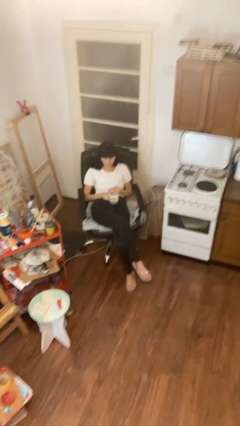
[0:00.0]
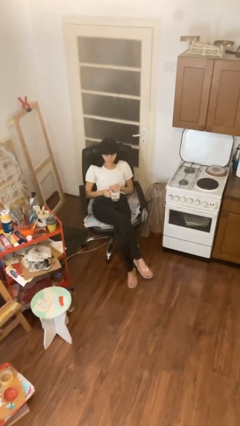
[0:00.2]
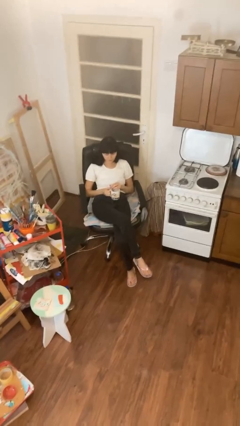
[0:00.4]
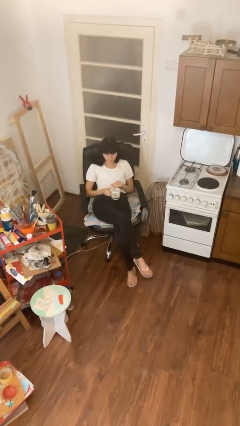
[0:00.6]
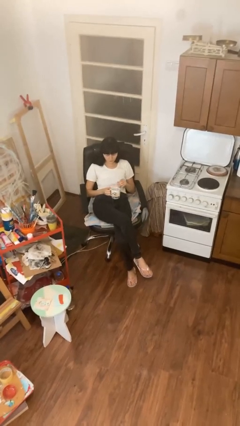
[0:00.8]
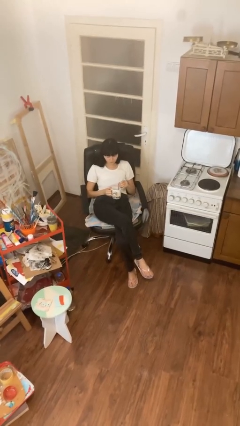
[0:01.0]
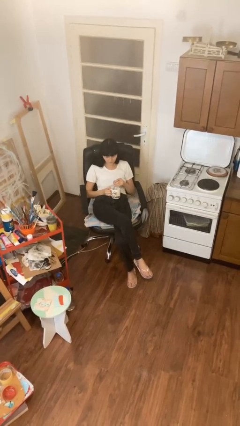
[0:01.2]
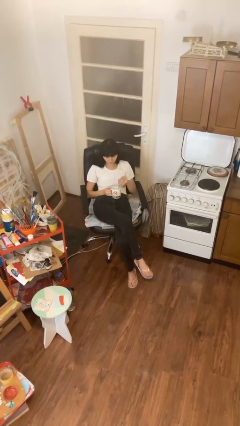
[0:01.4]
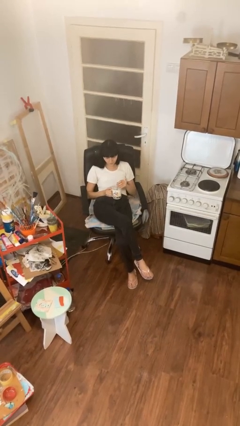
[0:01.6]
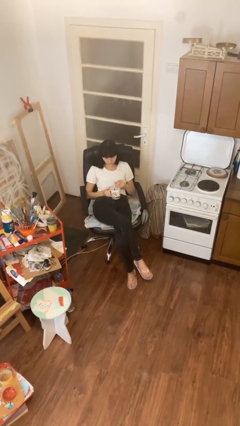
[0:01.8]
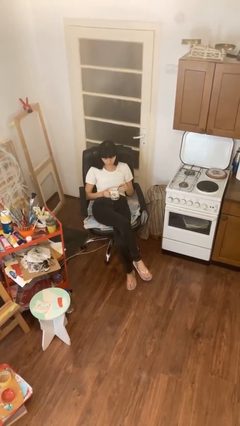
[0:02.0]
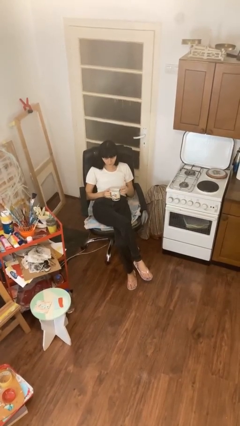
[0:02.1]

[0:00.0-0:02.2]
person stirs mug

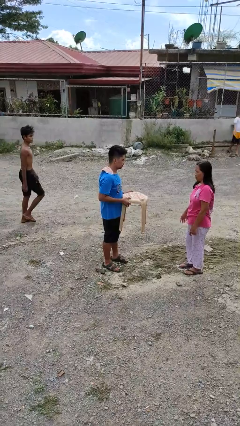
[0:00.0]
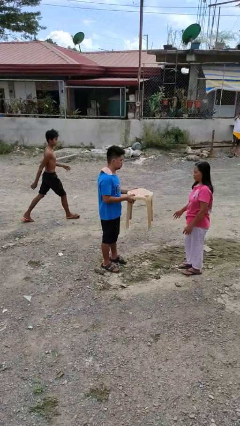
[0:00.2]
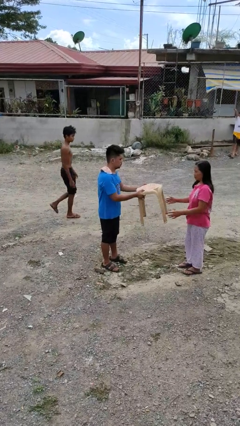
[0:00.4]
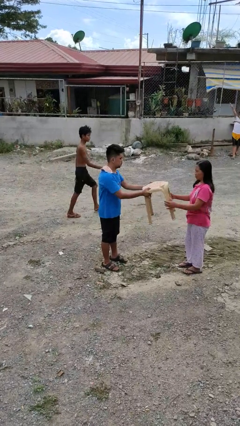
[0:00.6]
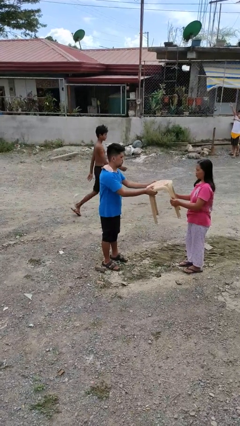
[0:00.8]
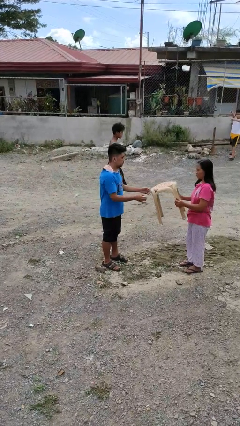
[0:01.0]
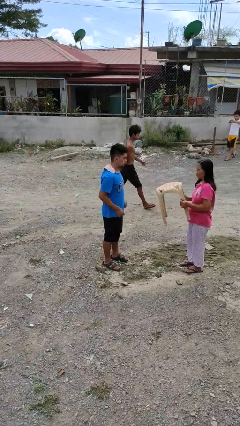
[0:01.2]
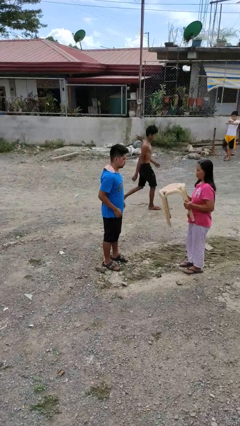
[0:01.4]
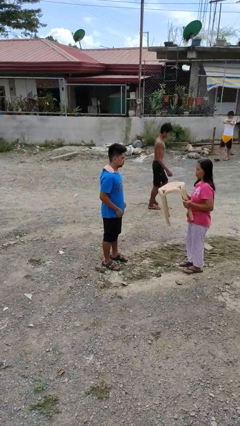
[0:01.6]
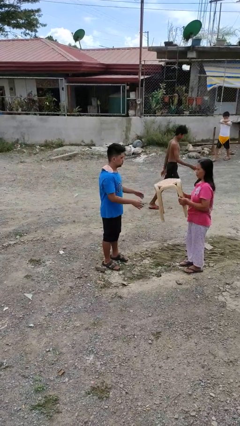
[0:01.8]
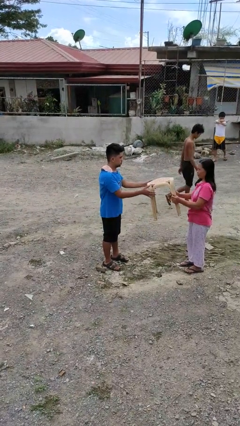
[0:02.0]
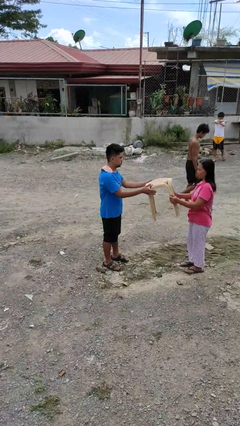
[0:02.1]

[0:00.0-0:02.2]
person transfers object to person

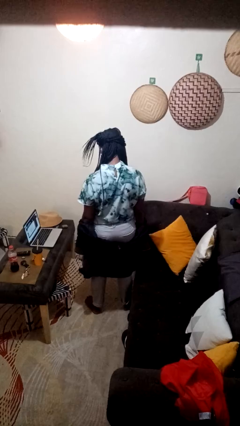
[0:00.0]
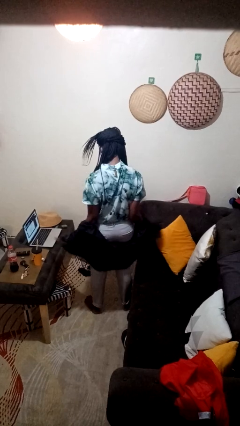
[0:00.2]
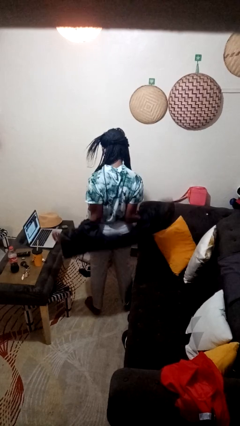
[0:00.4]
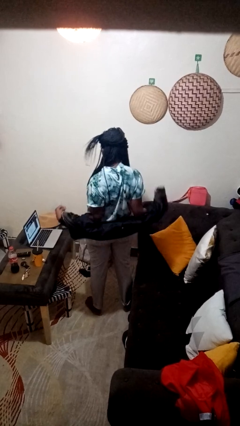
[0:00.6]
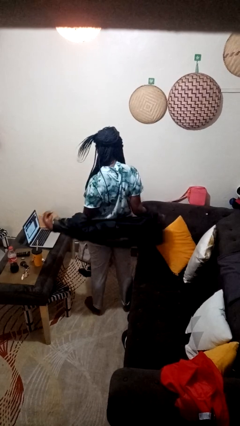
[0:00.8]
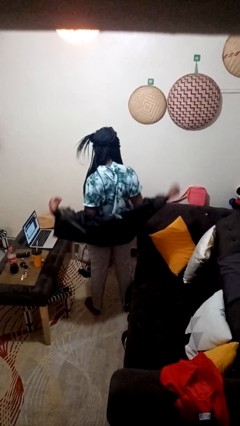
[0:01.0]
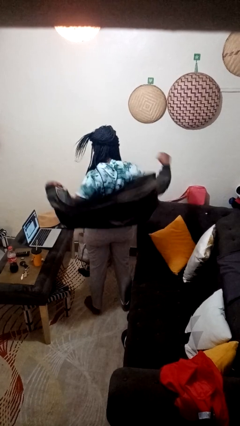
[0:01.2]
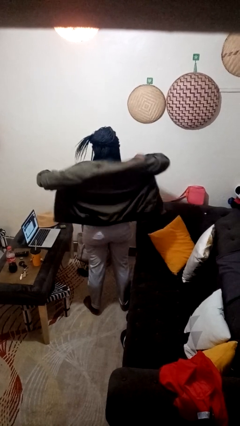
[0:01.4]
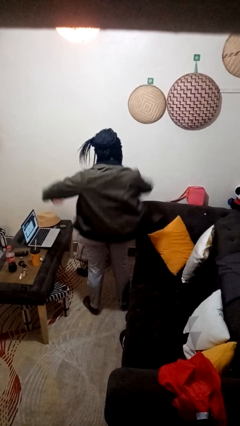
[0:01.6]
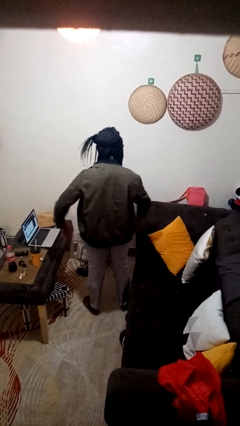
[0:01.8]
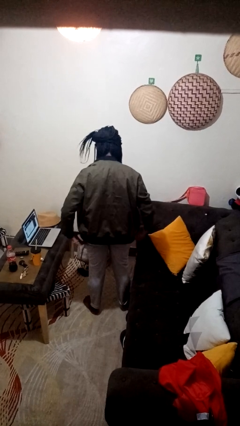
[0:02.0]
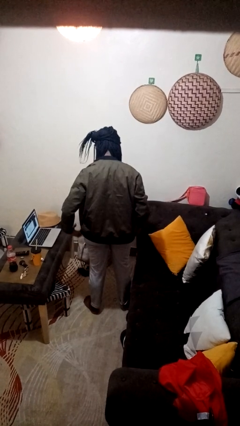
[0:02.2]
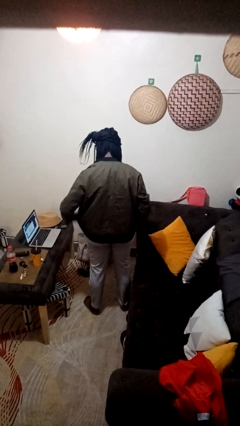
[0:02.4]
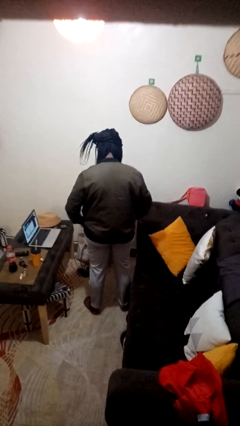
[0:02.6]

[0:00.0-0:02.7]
person puts on jacket

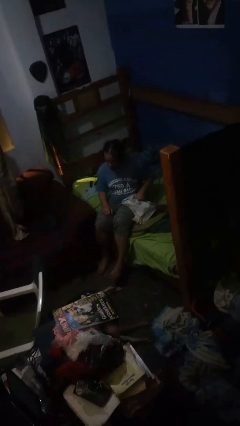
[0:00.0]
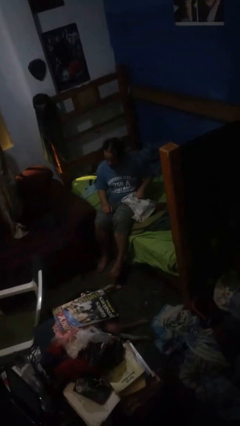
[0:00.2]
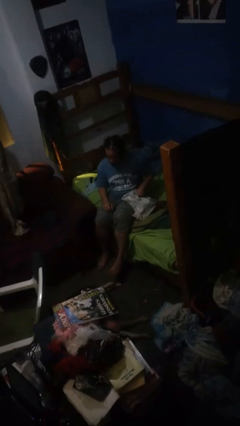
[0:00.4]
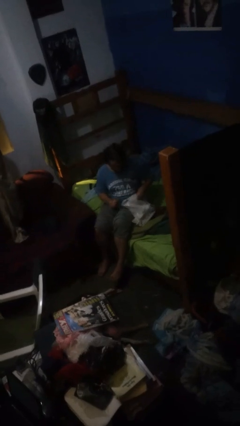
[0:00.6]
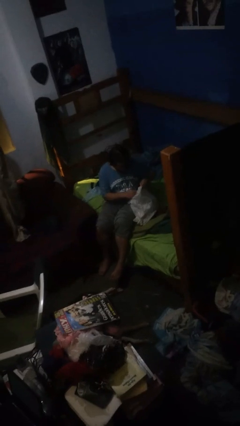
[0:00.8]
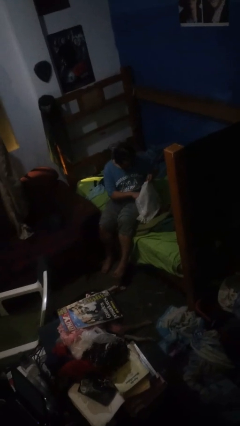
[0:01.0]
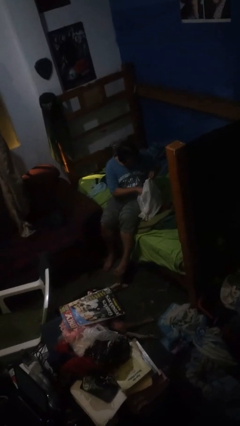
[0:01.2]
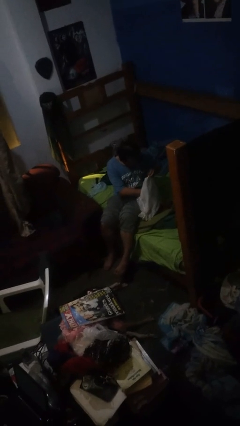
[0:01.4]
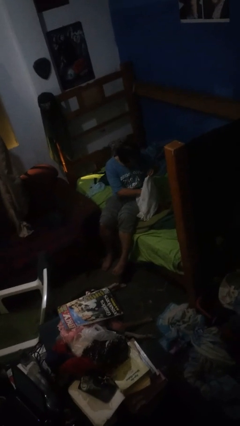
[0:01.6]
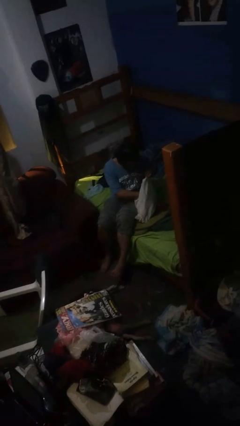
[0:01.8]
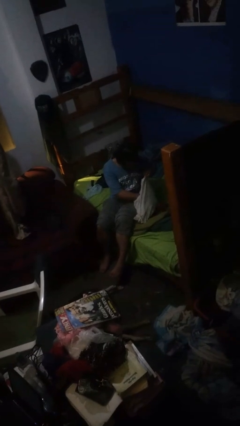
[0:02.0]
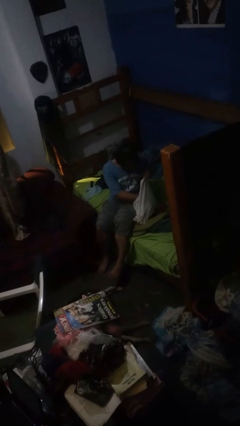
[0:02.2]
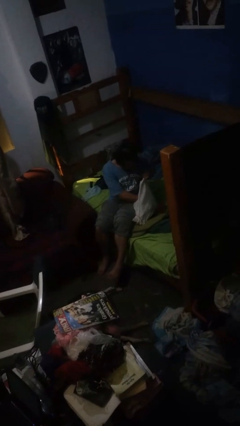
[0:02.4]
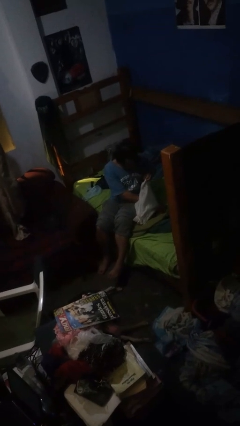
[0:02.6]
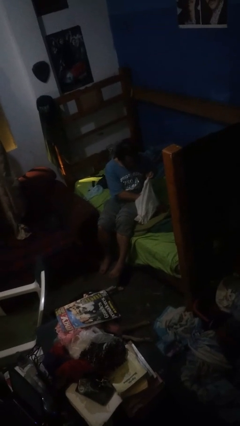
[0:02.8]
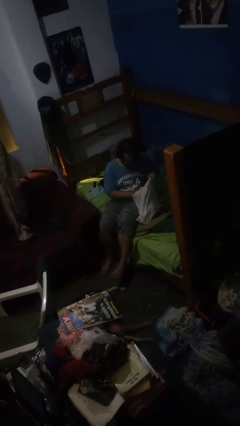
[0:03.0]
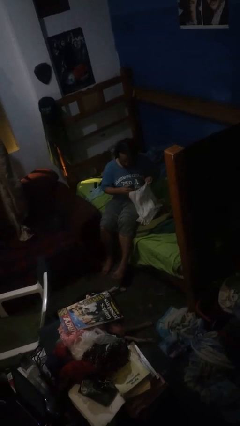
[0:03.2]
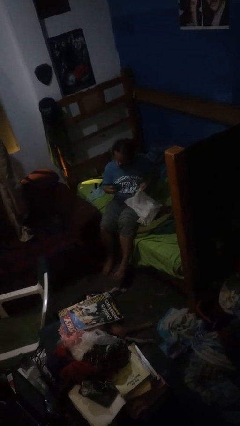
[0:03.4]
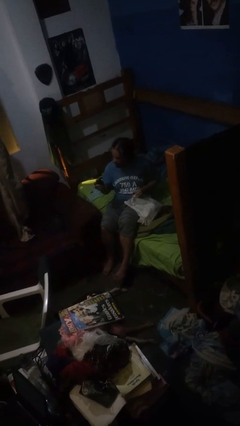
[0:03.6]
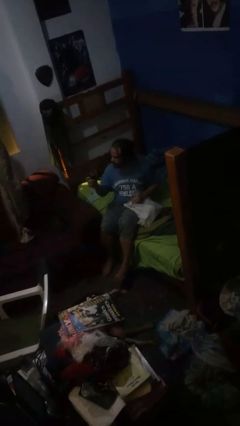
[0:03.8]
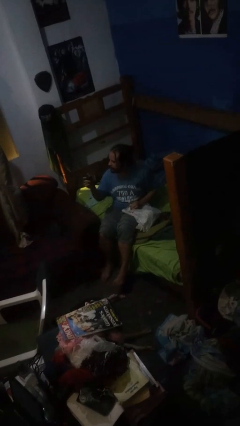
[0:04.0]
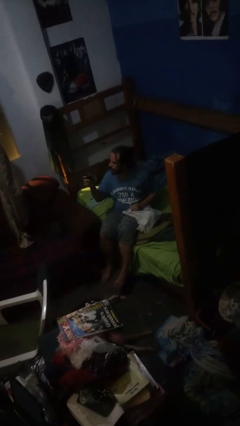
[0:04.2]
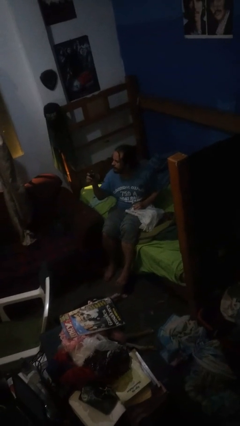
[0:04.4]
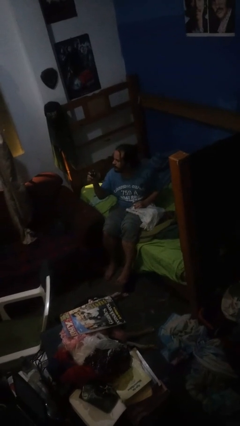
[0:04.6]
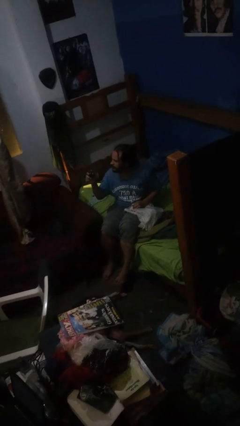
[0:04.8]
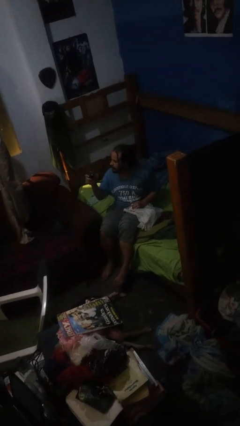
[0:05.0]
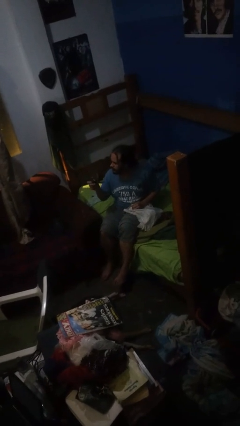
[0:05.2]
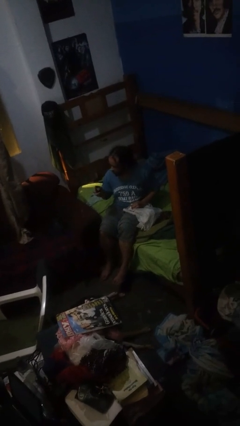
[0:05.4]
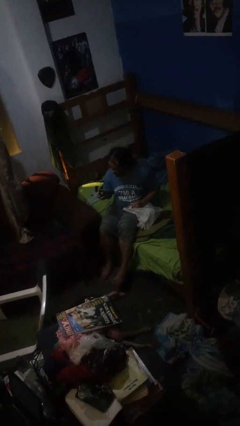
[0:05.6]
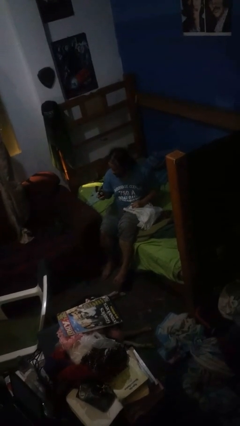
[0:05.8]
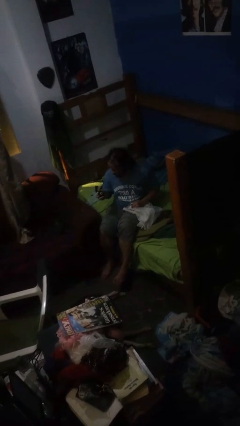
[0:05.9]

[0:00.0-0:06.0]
person takes object from bag

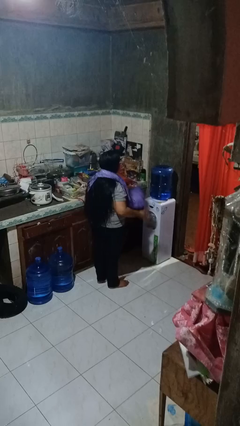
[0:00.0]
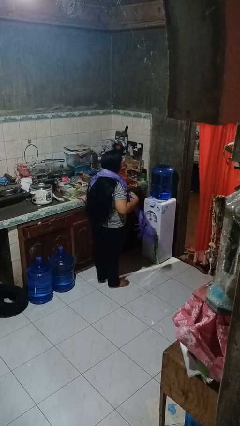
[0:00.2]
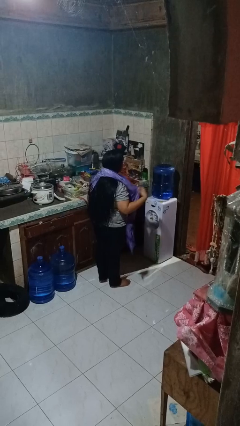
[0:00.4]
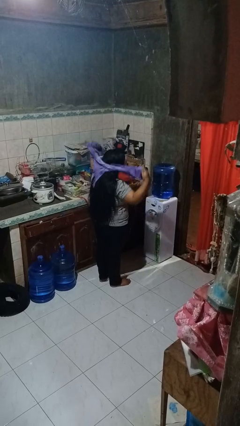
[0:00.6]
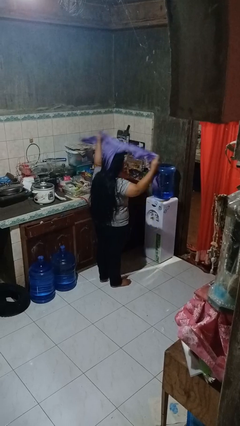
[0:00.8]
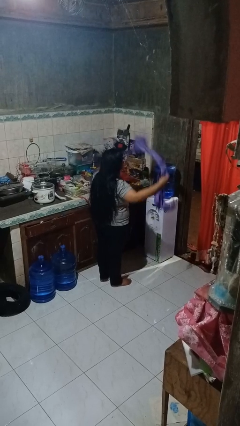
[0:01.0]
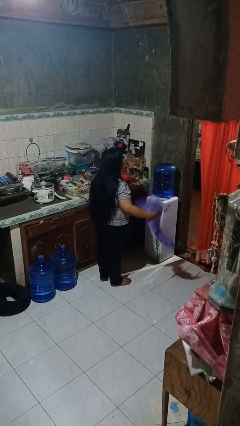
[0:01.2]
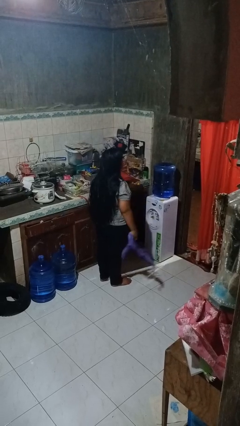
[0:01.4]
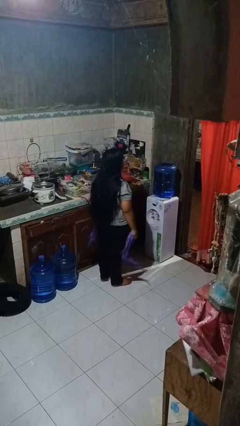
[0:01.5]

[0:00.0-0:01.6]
person takes off scarf

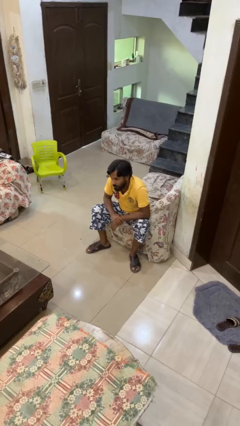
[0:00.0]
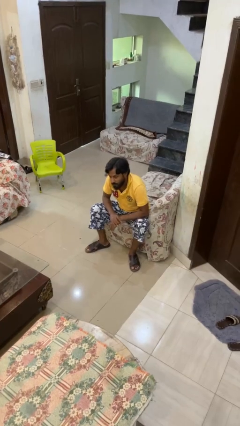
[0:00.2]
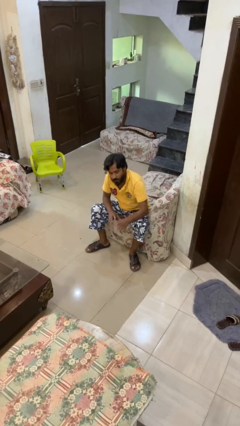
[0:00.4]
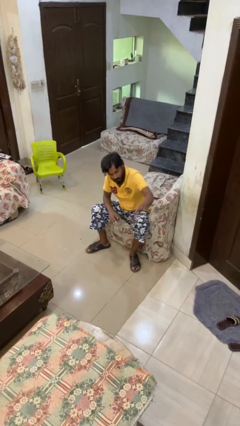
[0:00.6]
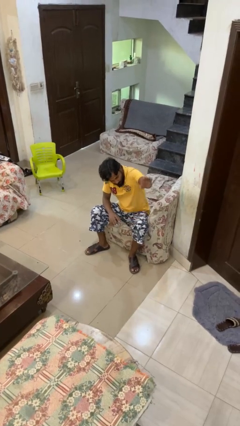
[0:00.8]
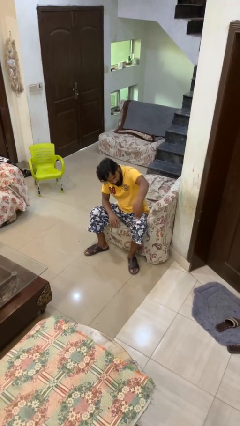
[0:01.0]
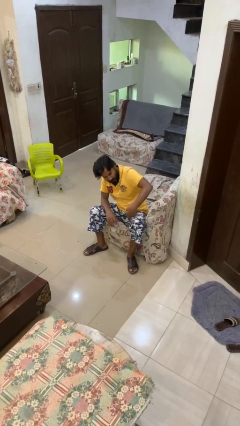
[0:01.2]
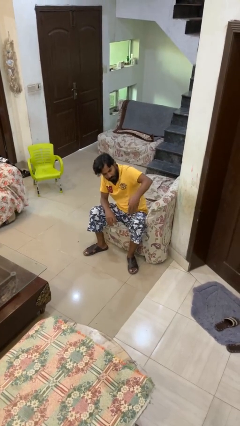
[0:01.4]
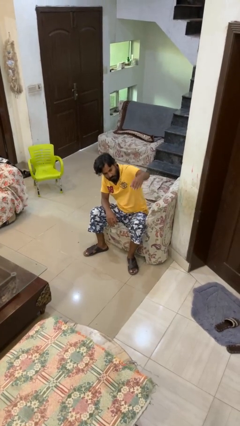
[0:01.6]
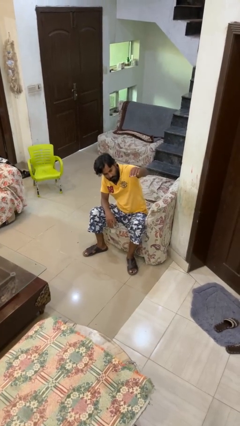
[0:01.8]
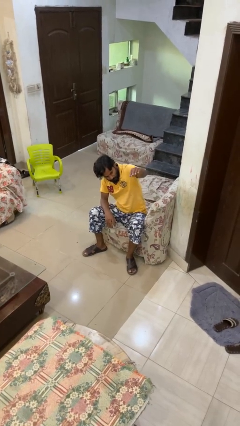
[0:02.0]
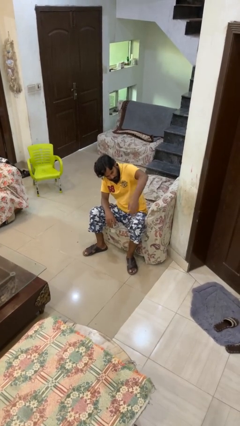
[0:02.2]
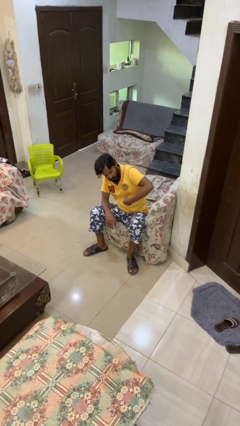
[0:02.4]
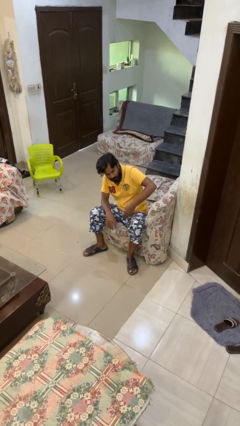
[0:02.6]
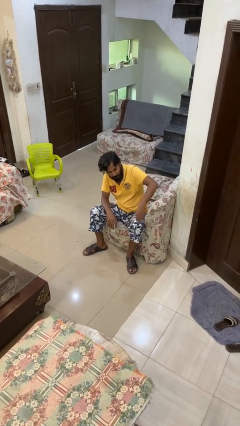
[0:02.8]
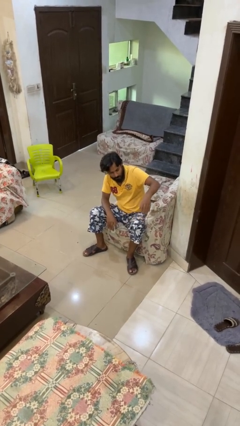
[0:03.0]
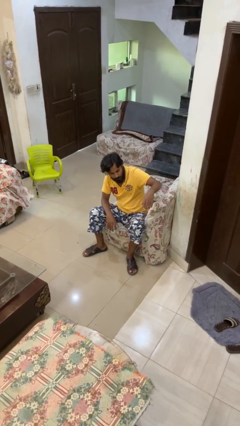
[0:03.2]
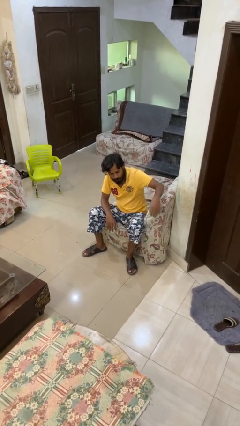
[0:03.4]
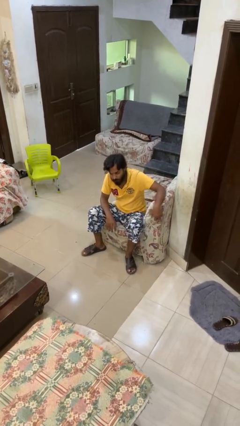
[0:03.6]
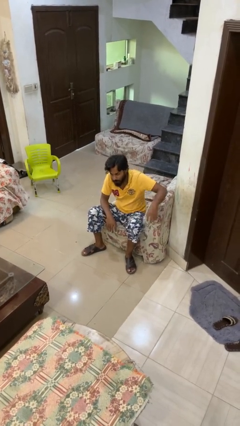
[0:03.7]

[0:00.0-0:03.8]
person gestures come here
